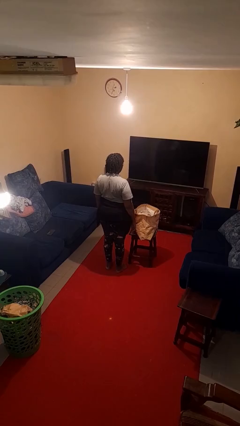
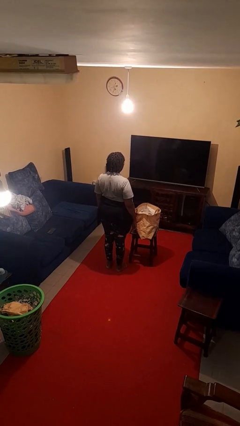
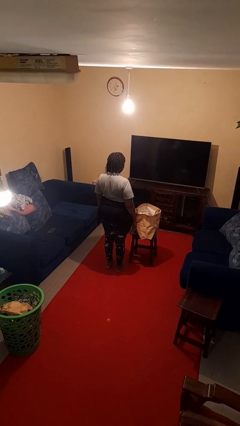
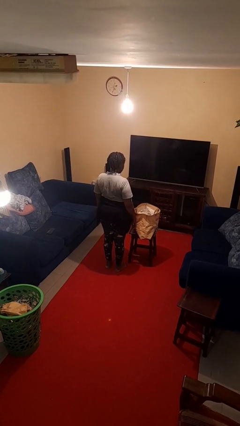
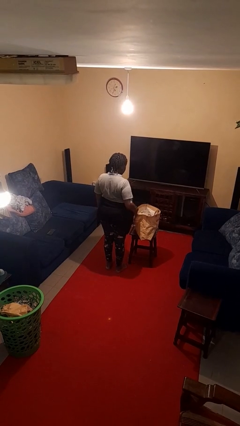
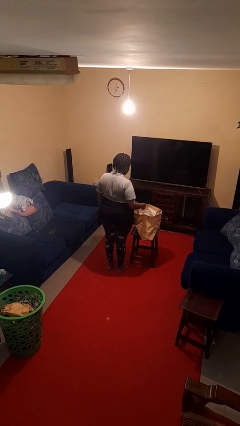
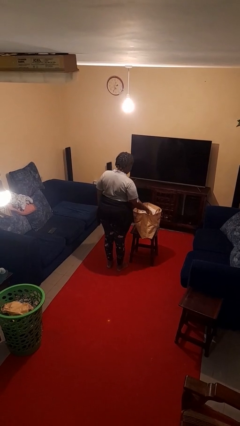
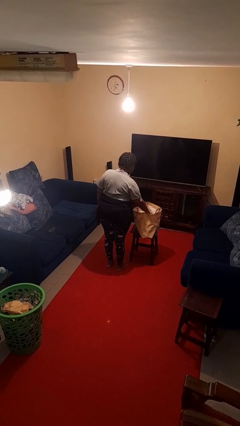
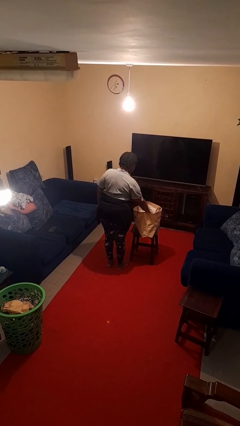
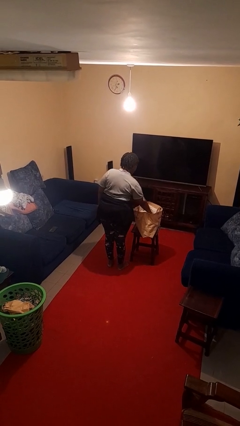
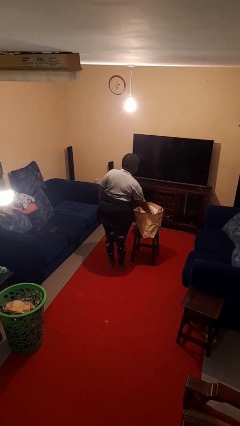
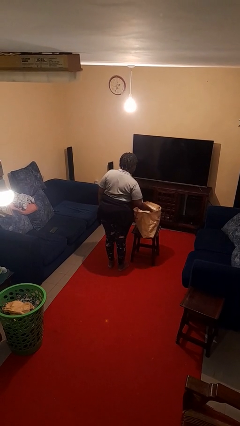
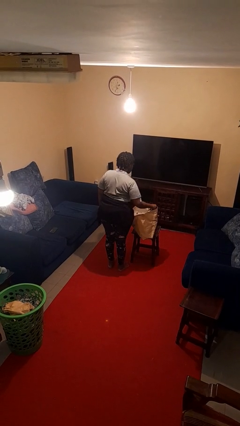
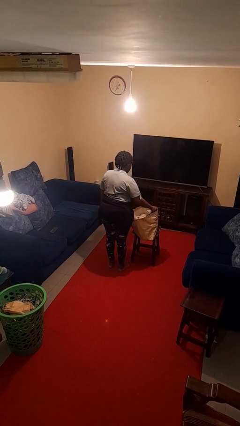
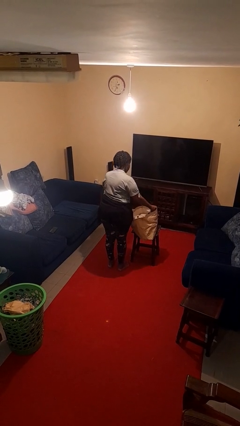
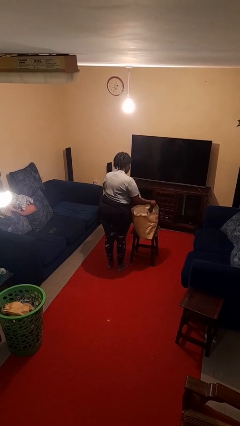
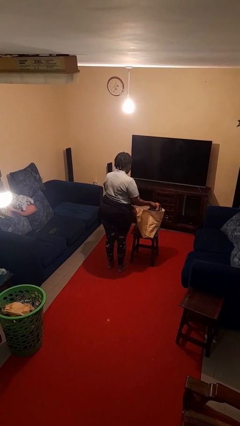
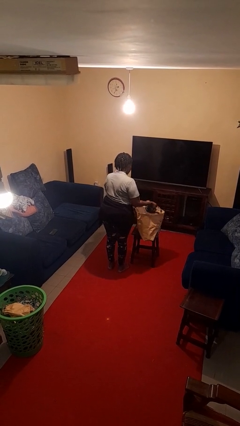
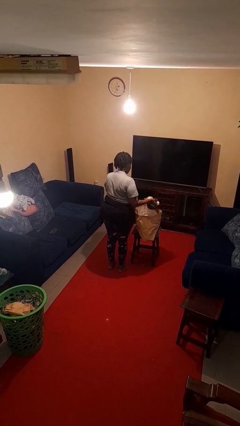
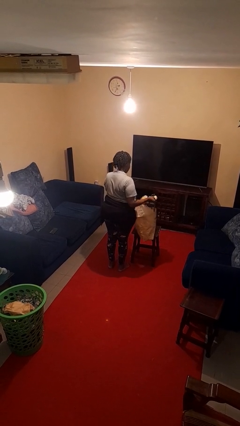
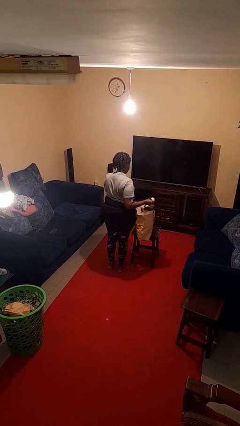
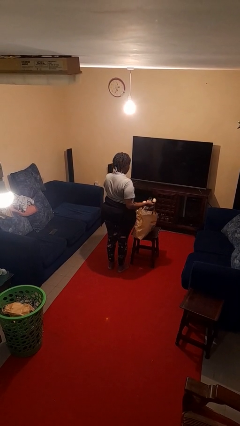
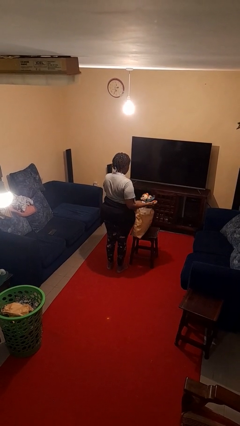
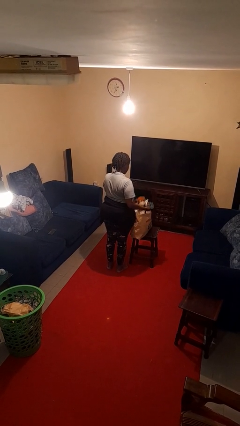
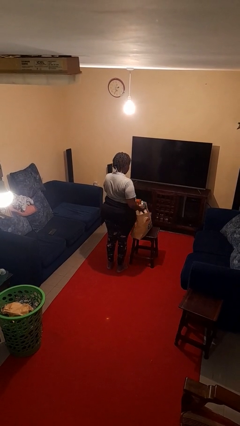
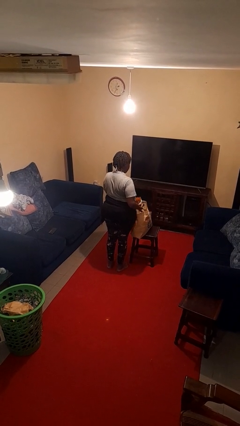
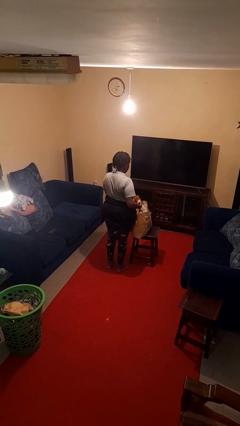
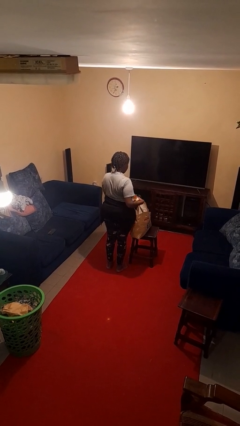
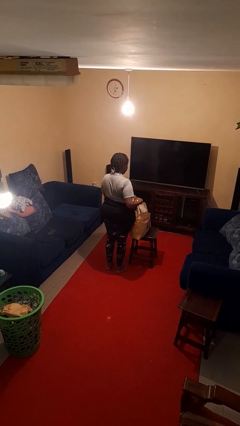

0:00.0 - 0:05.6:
person takes object from bag

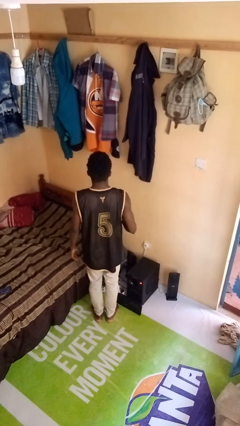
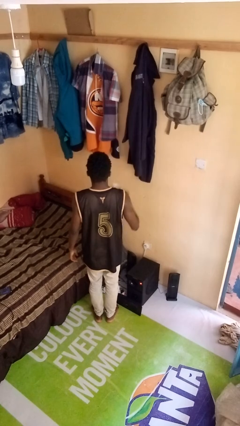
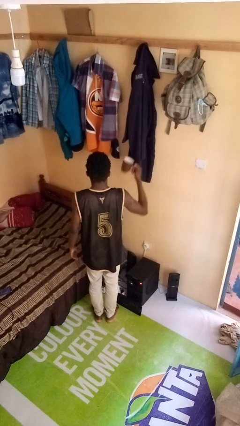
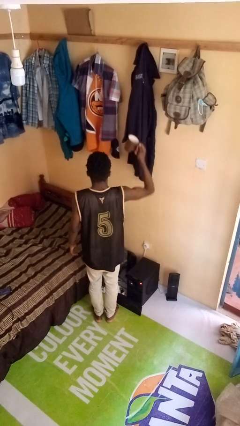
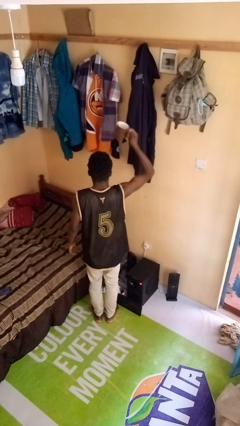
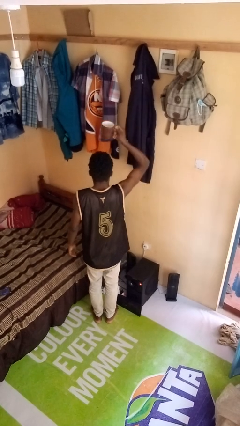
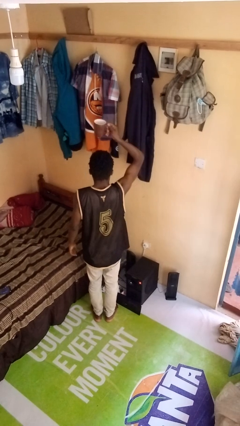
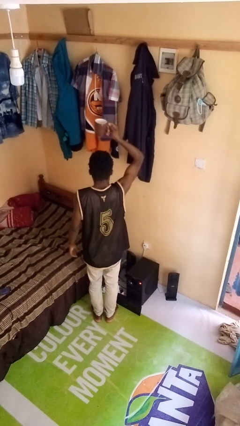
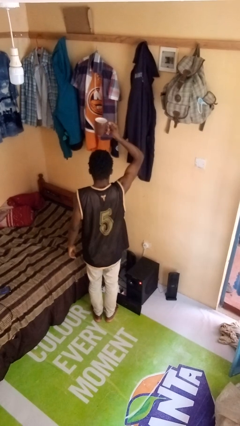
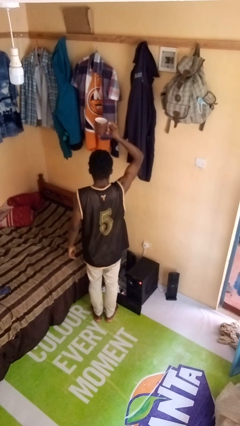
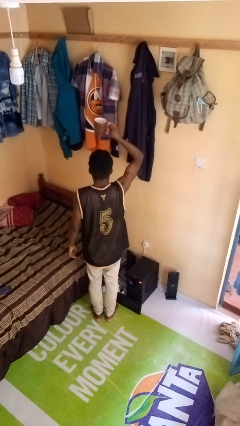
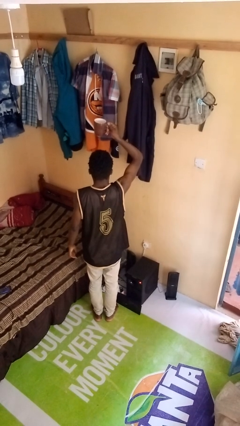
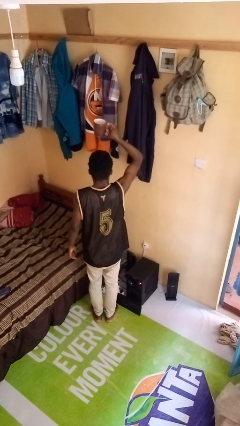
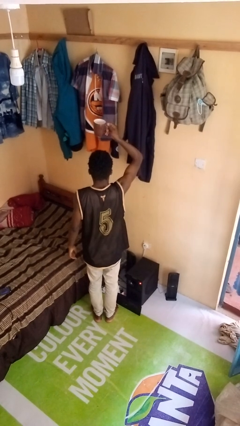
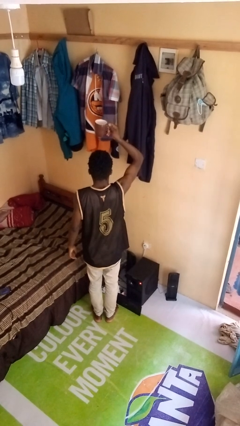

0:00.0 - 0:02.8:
person holds object above head

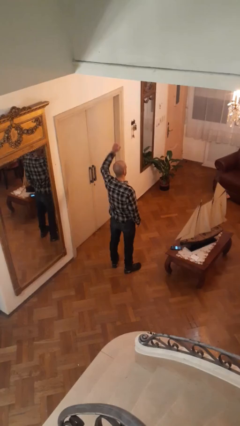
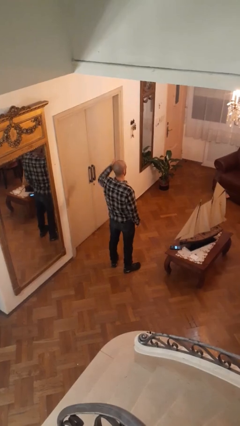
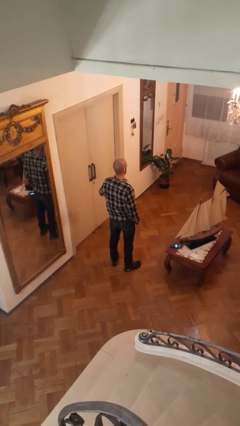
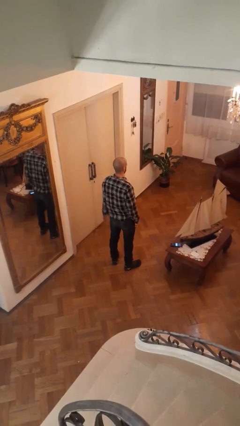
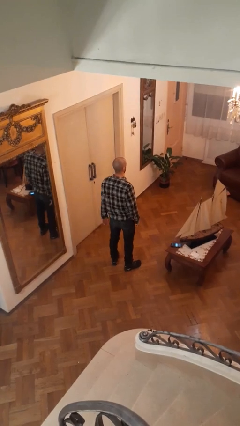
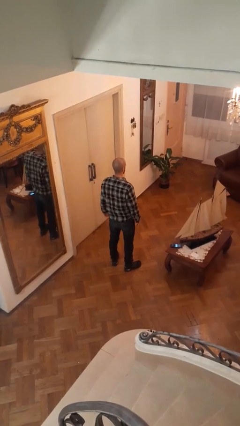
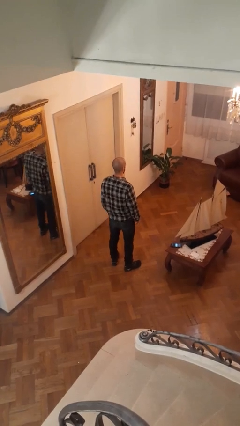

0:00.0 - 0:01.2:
person gestures lower hand

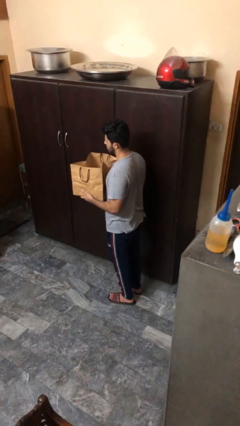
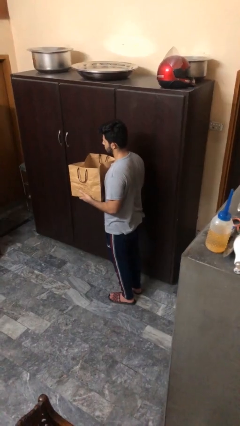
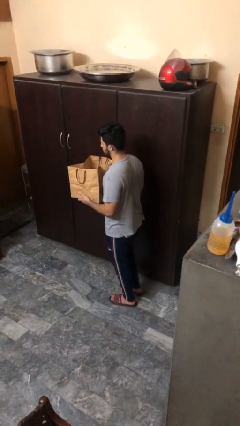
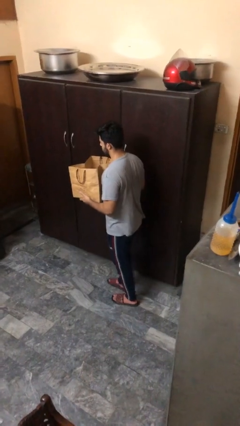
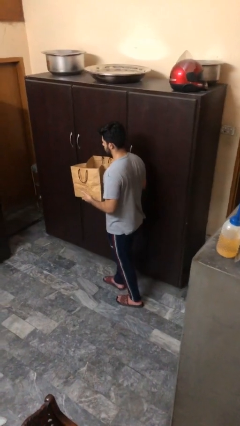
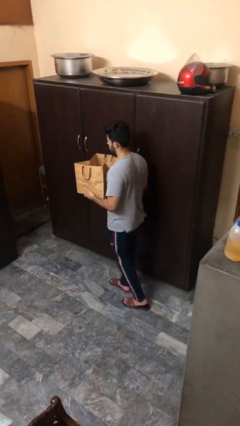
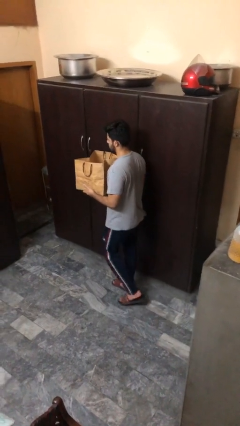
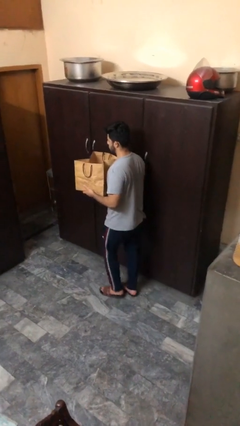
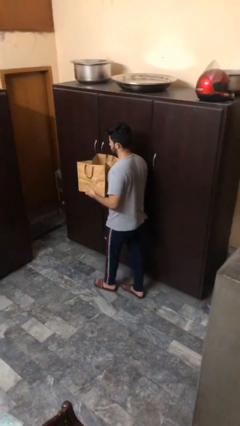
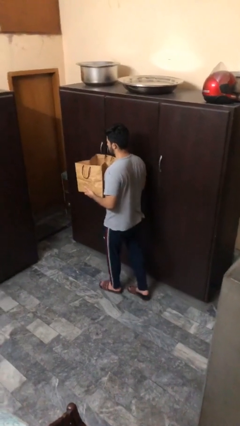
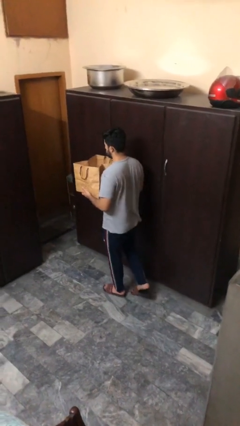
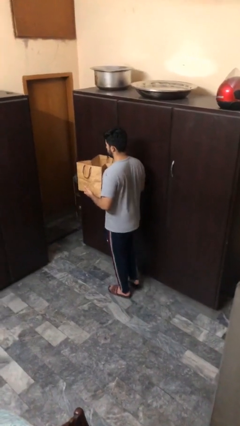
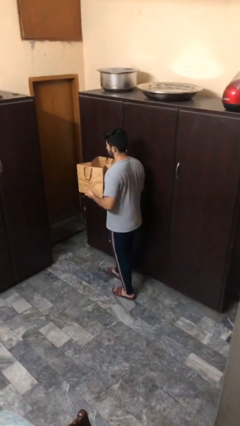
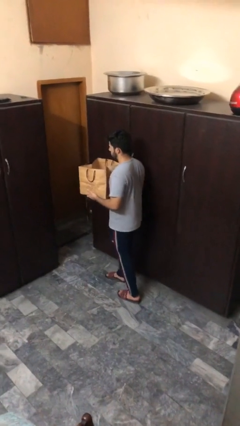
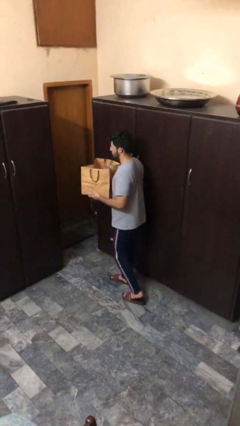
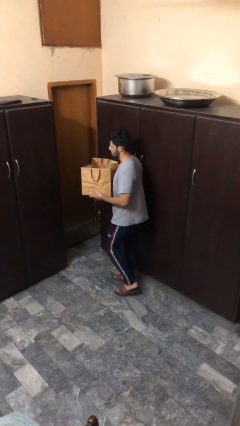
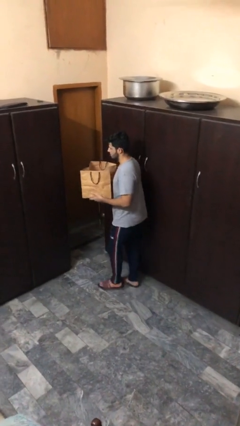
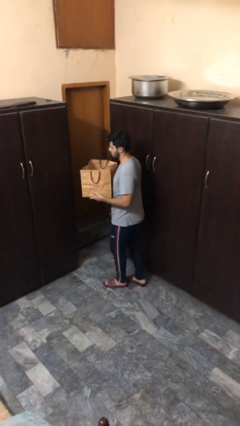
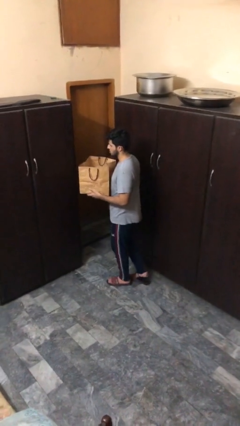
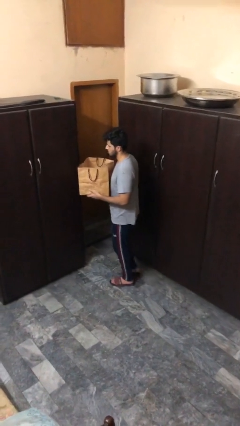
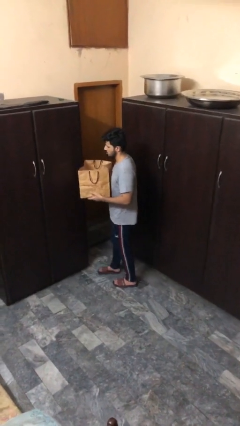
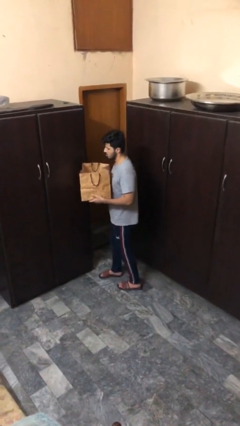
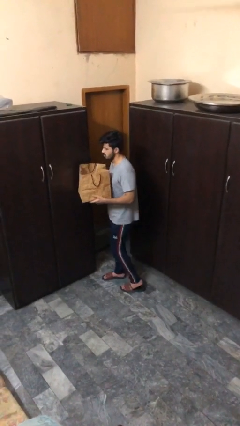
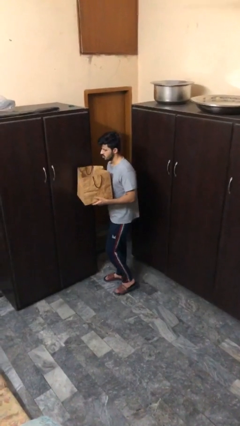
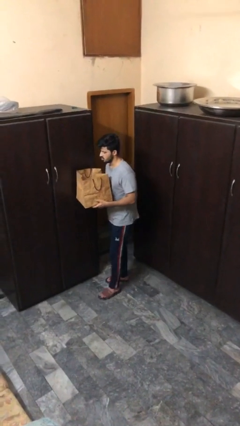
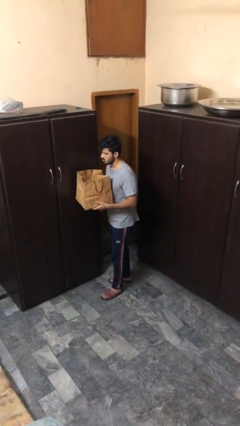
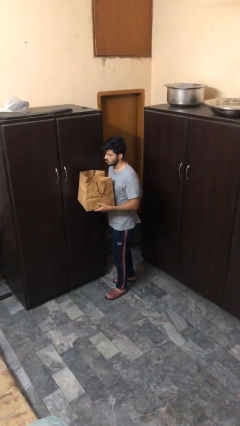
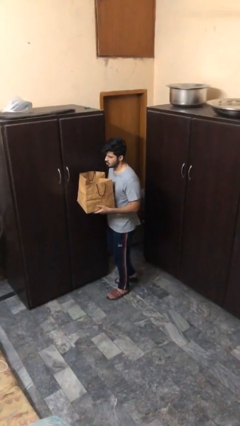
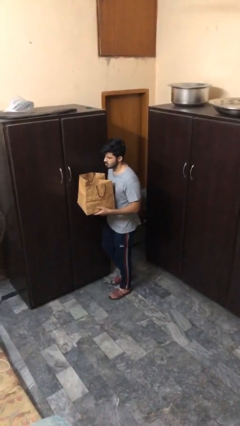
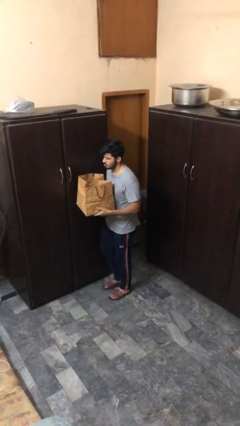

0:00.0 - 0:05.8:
person carries groceries

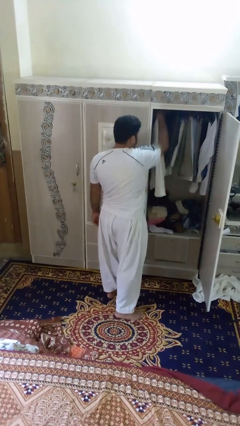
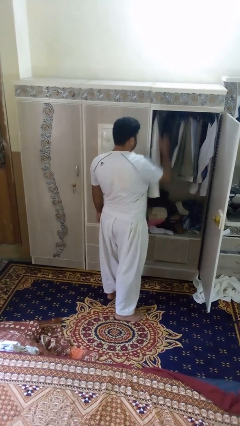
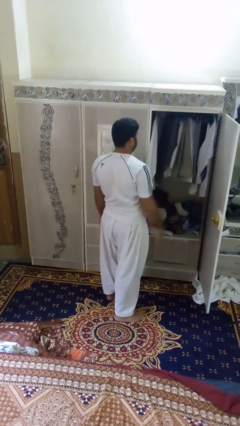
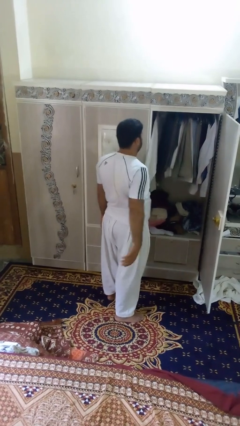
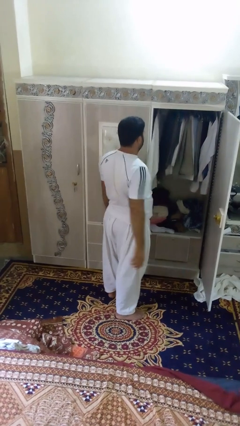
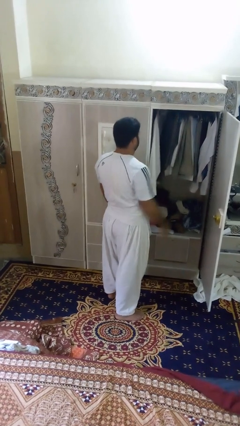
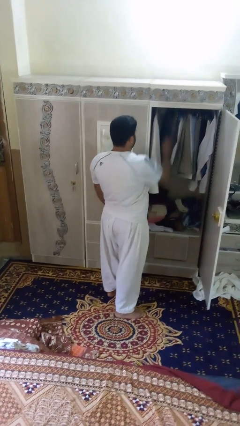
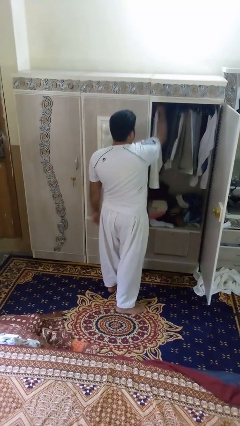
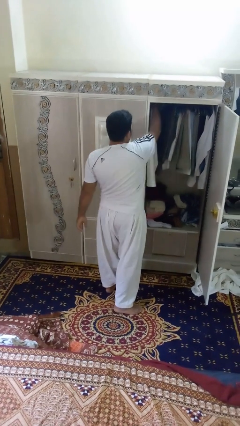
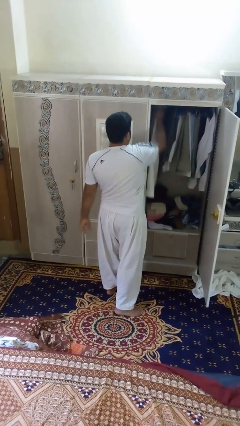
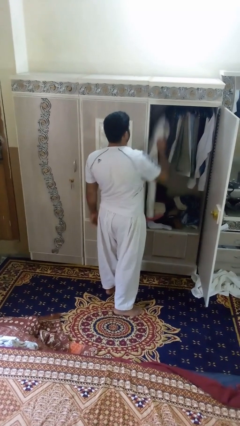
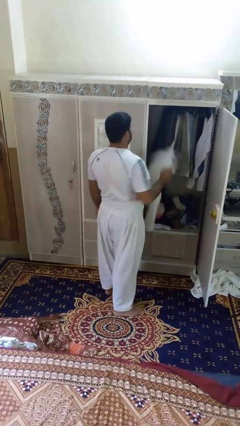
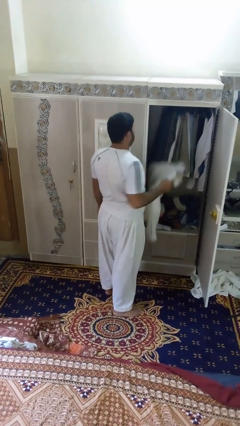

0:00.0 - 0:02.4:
person takes clothes from closet

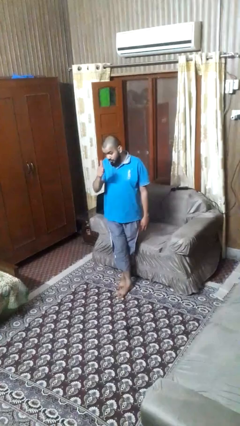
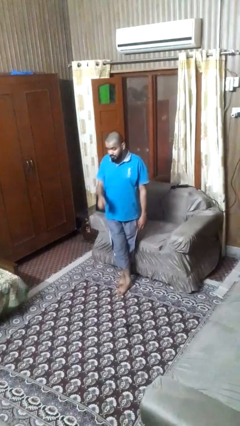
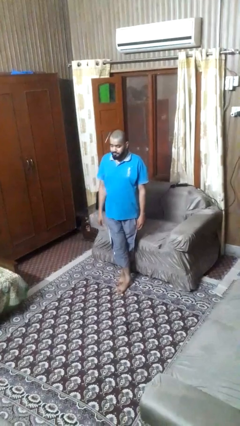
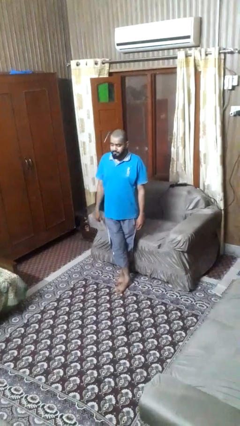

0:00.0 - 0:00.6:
person gestures thumbs up
